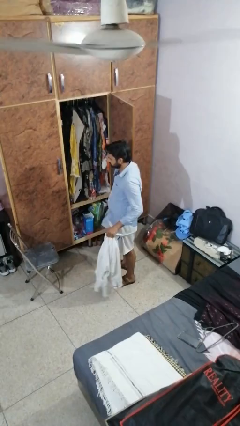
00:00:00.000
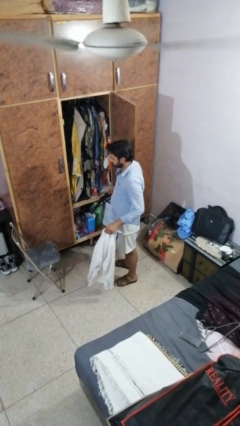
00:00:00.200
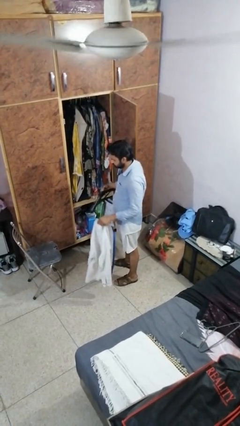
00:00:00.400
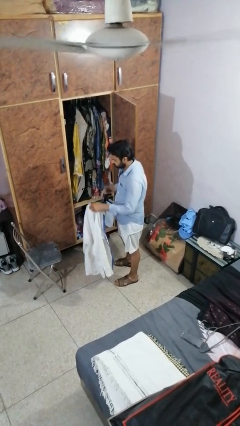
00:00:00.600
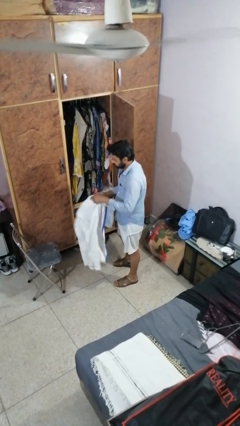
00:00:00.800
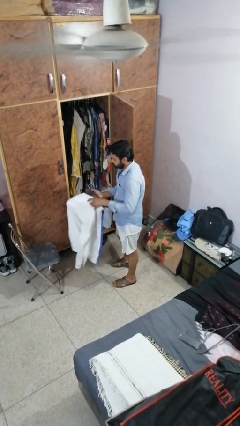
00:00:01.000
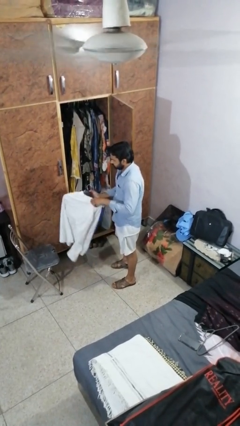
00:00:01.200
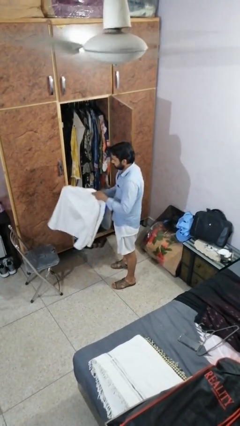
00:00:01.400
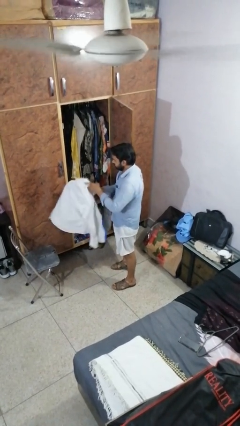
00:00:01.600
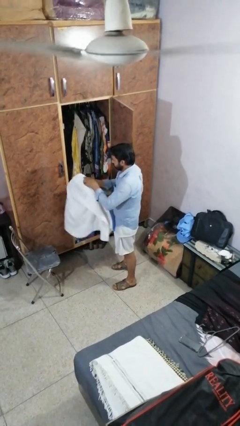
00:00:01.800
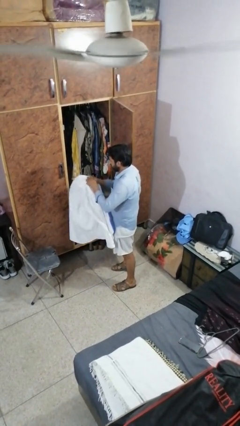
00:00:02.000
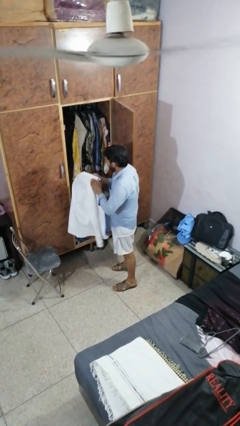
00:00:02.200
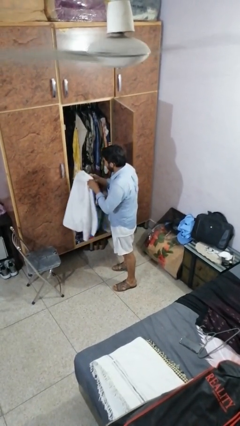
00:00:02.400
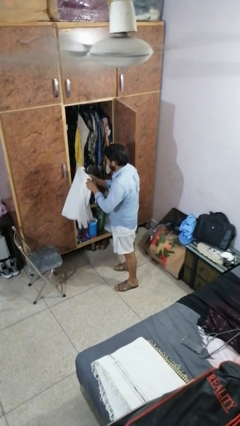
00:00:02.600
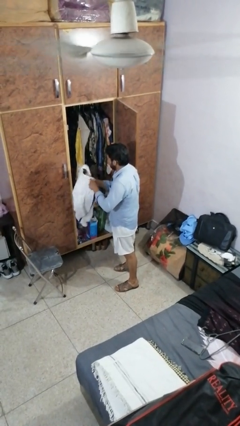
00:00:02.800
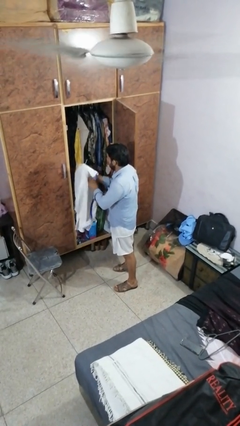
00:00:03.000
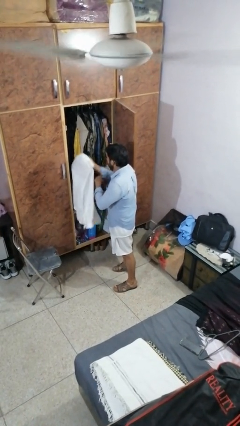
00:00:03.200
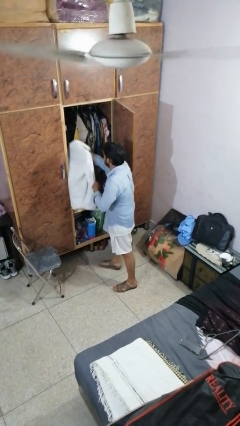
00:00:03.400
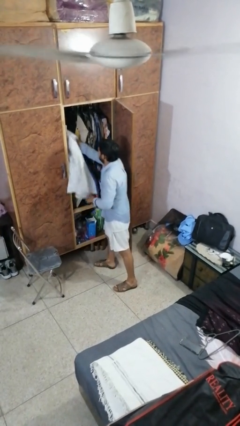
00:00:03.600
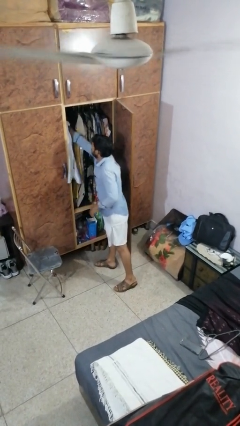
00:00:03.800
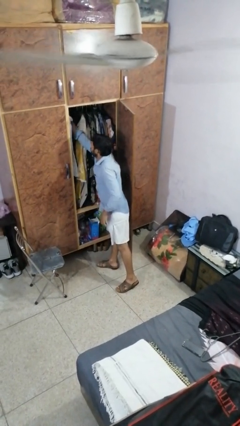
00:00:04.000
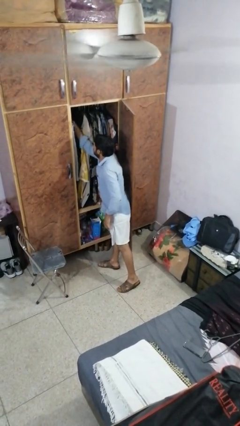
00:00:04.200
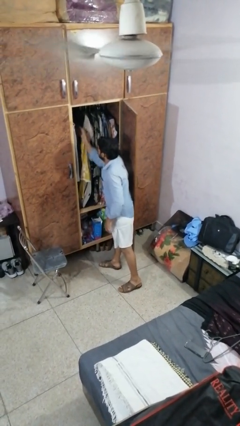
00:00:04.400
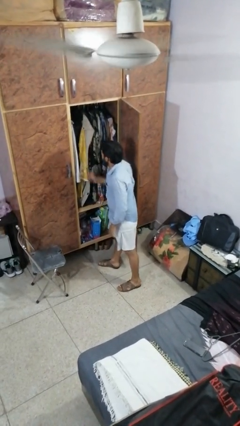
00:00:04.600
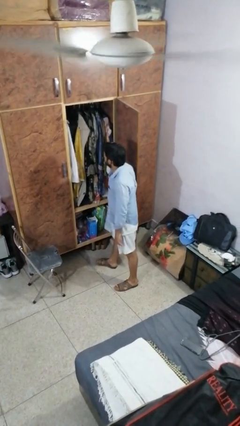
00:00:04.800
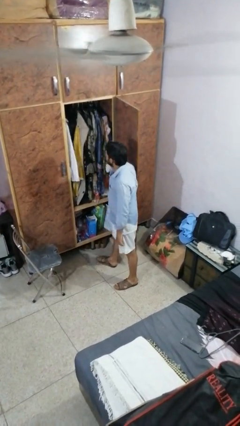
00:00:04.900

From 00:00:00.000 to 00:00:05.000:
person puts clothes into closet

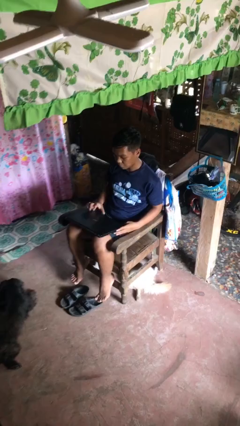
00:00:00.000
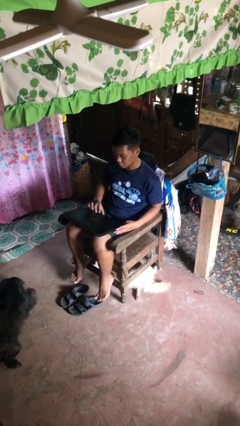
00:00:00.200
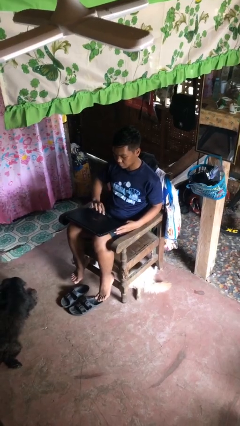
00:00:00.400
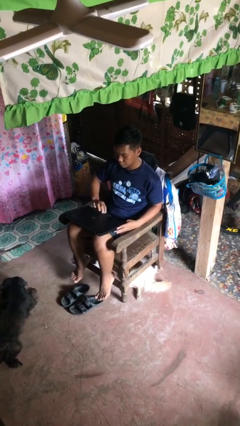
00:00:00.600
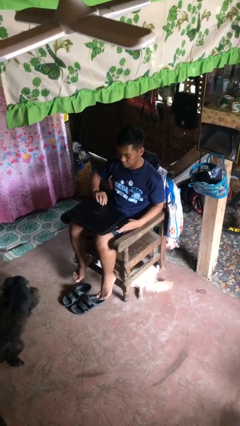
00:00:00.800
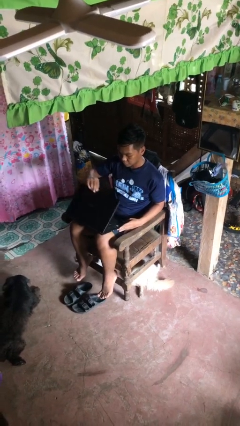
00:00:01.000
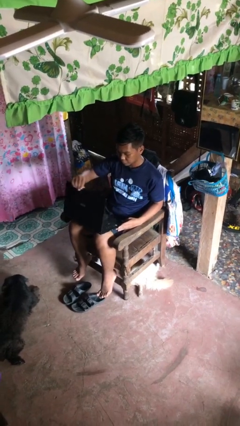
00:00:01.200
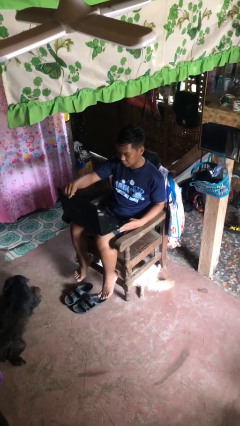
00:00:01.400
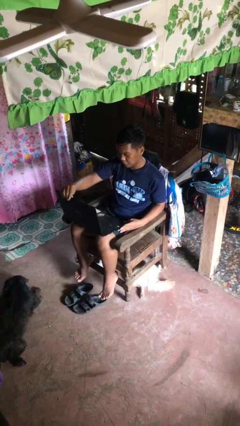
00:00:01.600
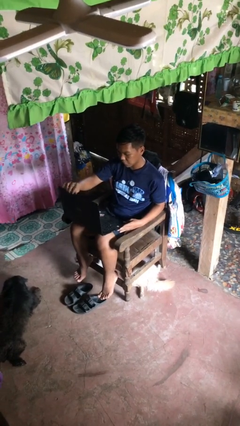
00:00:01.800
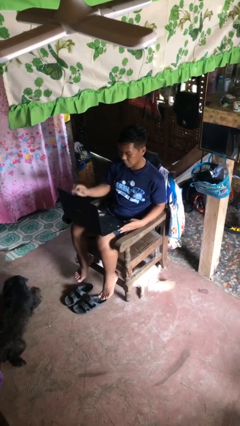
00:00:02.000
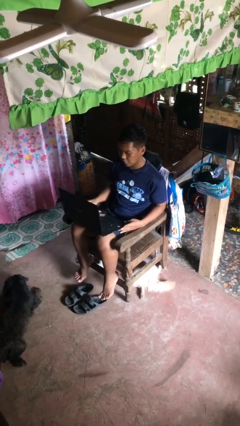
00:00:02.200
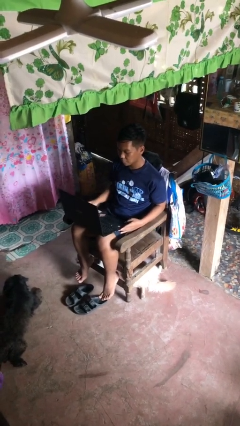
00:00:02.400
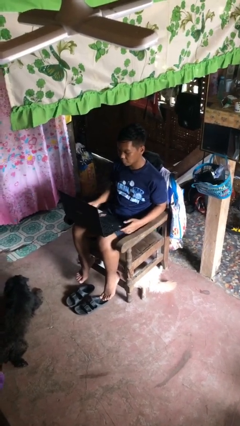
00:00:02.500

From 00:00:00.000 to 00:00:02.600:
person opens laptop

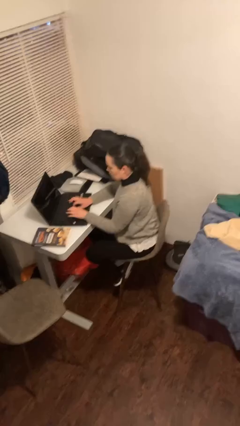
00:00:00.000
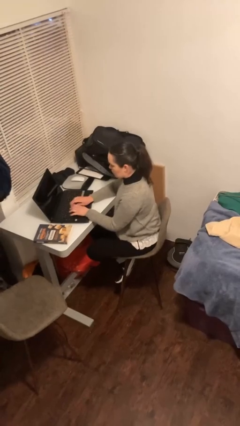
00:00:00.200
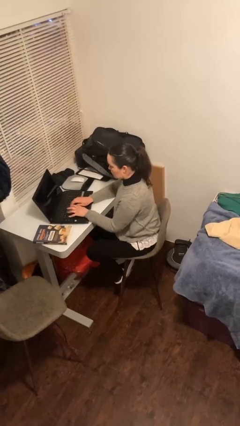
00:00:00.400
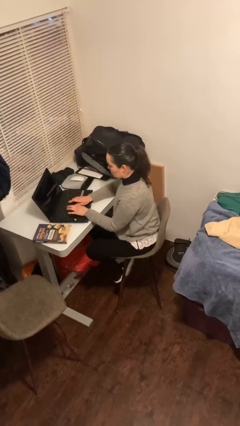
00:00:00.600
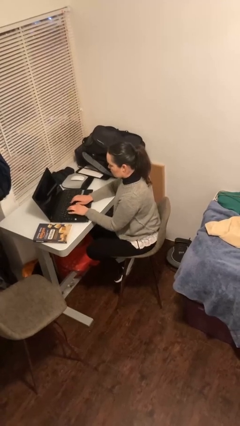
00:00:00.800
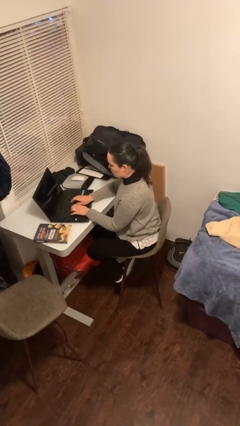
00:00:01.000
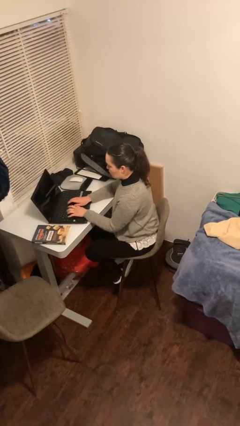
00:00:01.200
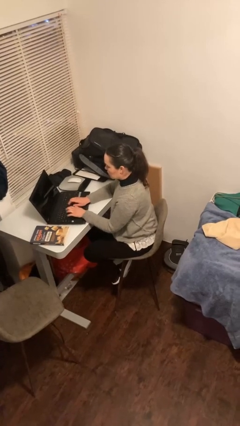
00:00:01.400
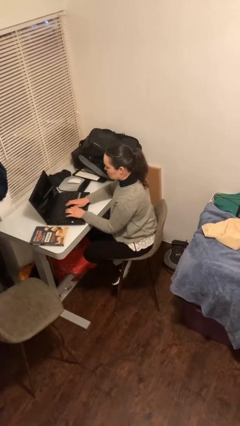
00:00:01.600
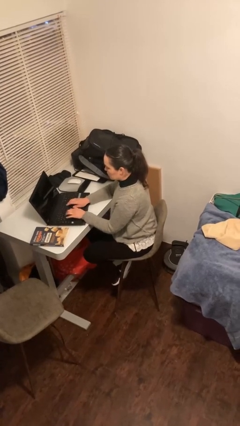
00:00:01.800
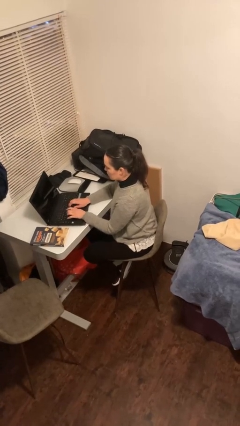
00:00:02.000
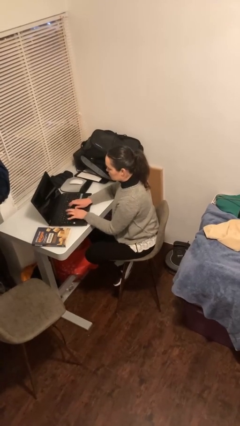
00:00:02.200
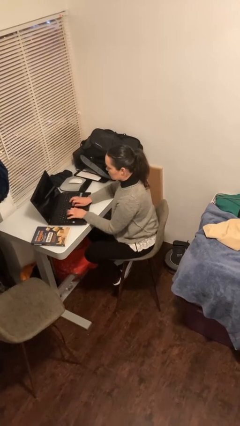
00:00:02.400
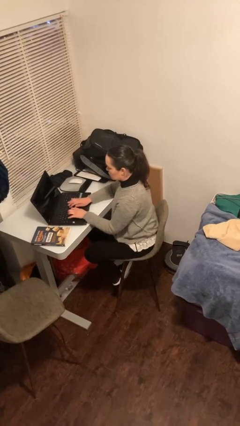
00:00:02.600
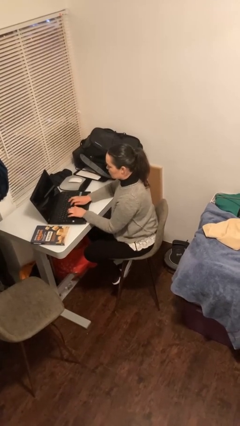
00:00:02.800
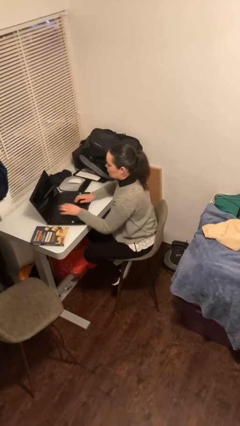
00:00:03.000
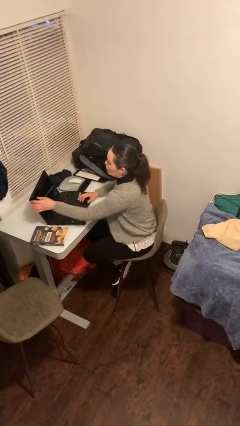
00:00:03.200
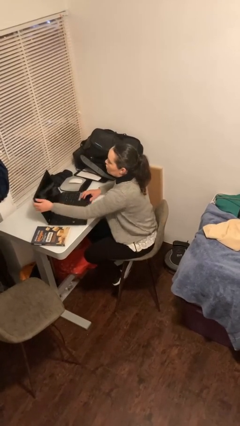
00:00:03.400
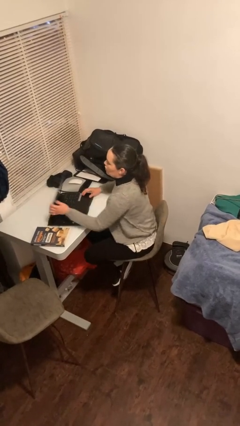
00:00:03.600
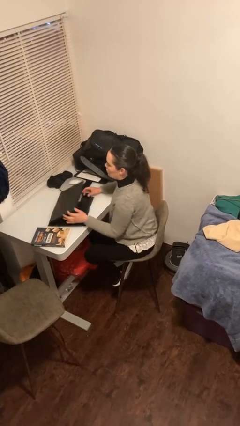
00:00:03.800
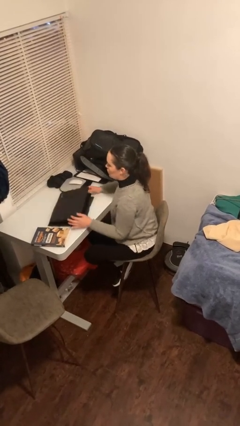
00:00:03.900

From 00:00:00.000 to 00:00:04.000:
person interacts with laptop

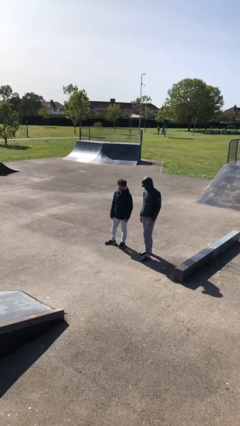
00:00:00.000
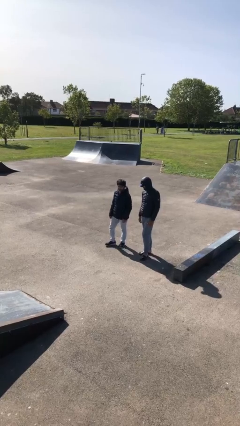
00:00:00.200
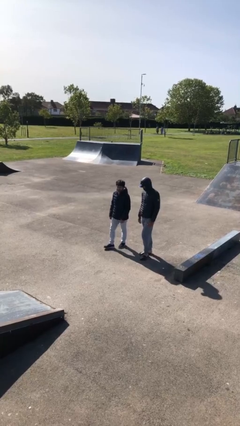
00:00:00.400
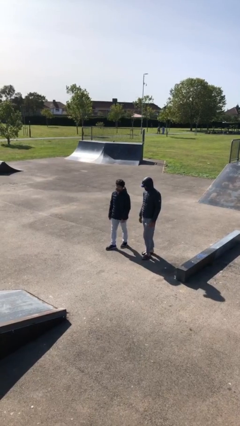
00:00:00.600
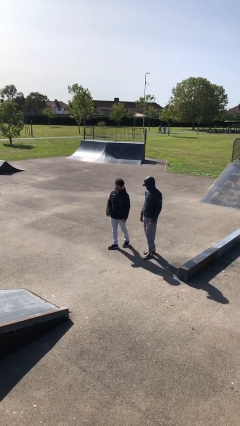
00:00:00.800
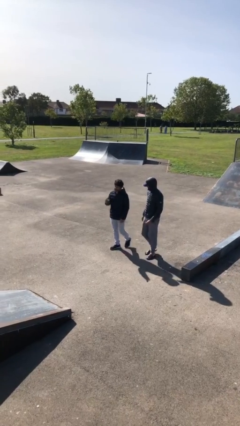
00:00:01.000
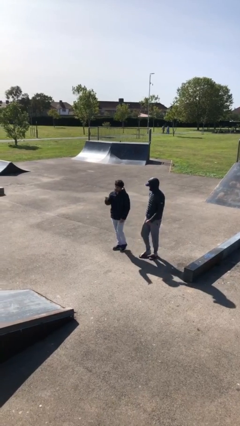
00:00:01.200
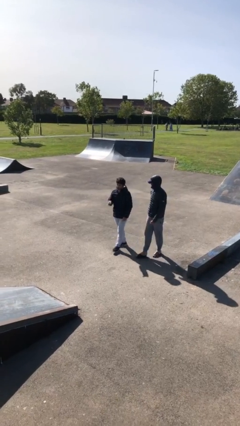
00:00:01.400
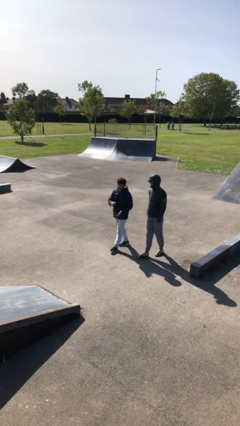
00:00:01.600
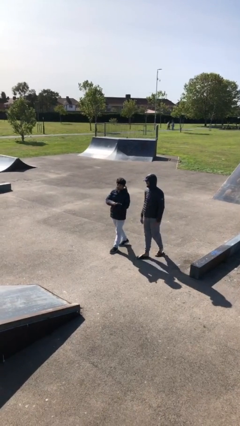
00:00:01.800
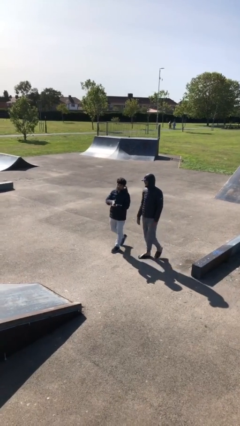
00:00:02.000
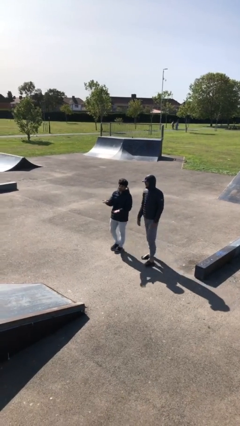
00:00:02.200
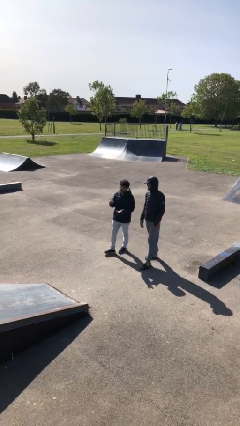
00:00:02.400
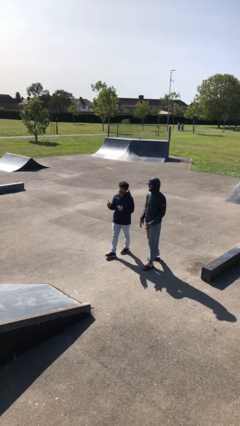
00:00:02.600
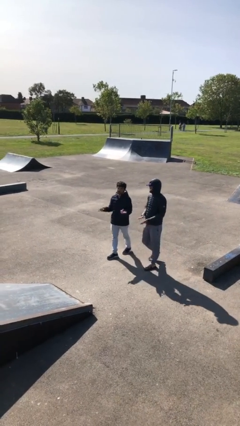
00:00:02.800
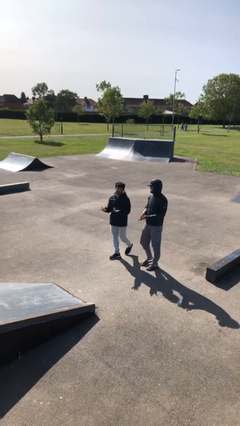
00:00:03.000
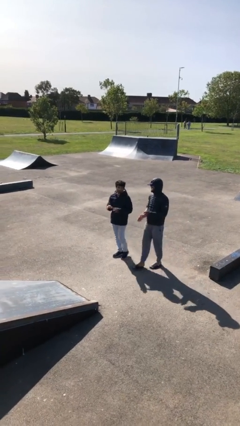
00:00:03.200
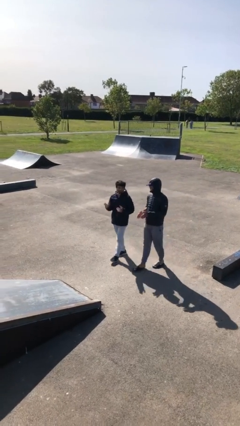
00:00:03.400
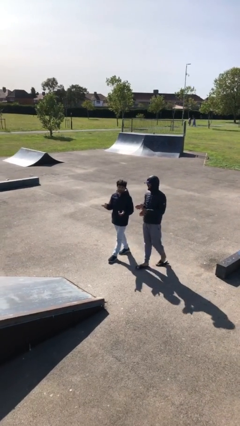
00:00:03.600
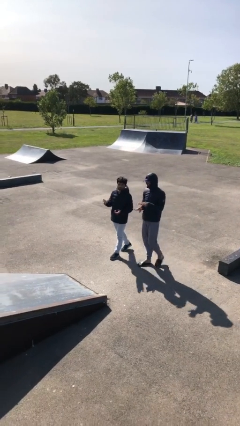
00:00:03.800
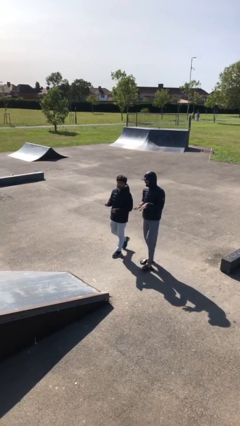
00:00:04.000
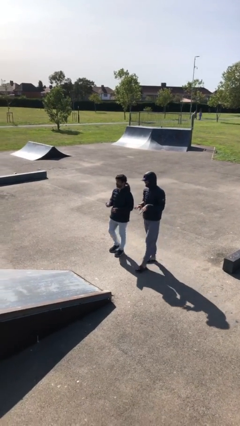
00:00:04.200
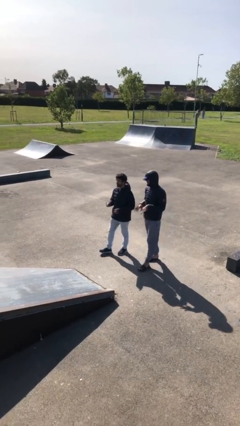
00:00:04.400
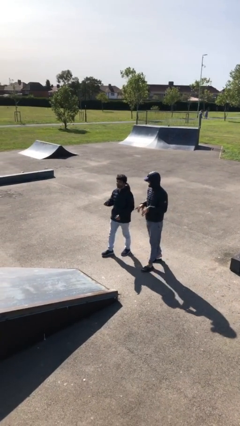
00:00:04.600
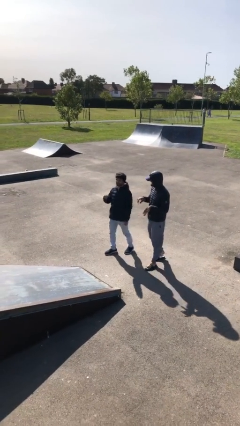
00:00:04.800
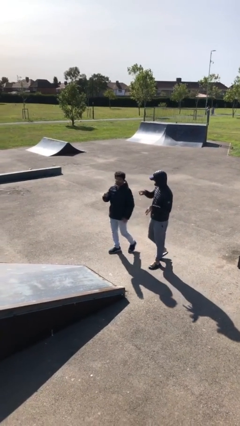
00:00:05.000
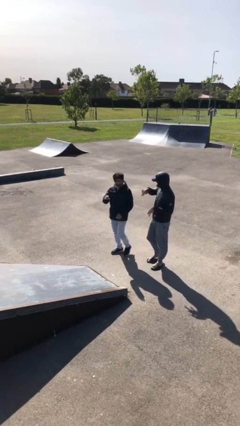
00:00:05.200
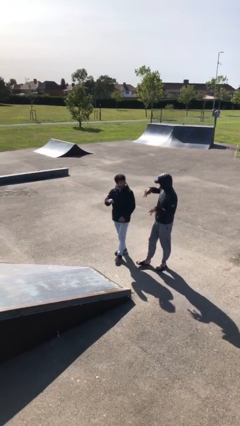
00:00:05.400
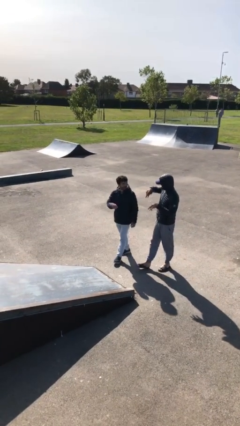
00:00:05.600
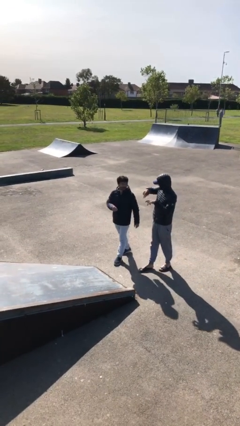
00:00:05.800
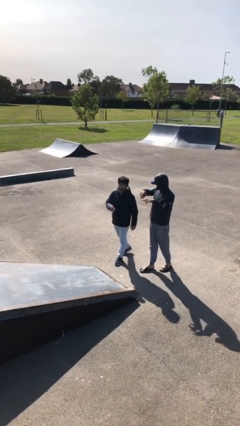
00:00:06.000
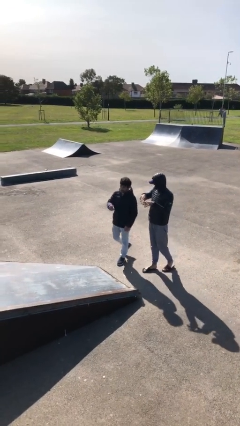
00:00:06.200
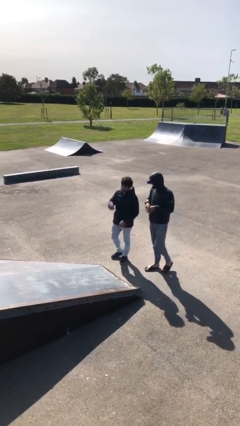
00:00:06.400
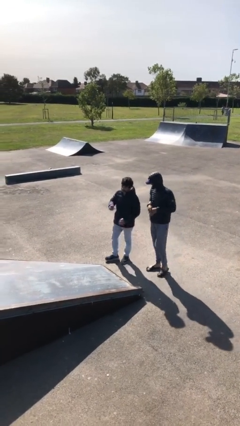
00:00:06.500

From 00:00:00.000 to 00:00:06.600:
person talks to person
